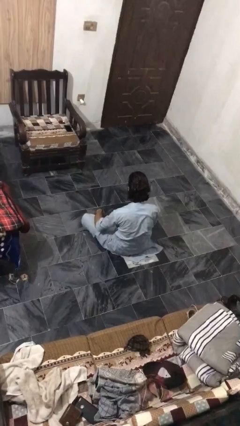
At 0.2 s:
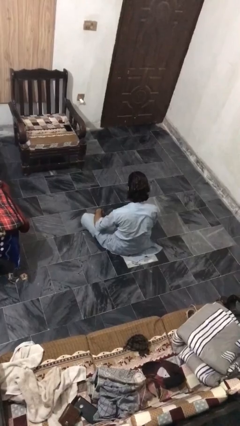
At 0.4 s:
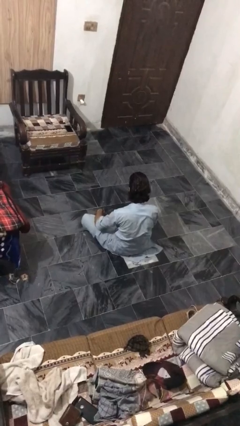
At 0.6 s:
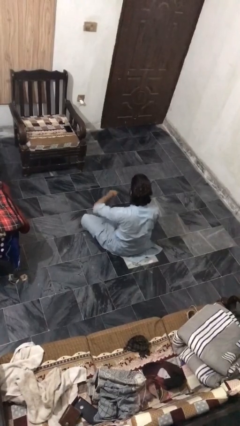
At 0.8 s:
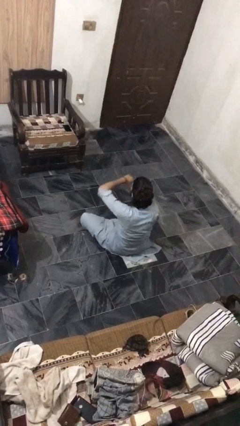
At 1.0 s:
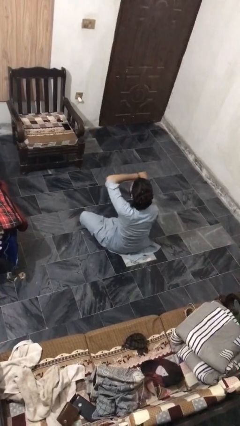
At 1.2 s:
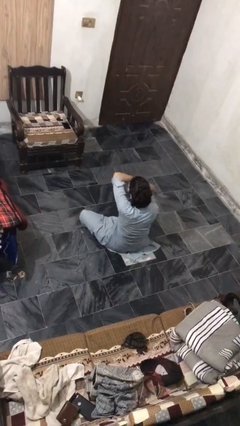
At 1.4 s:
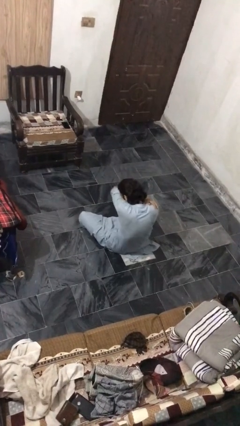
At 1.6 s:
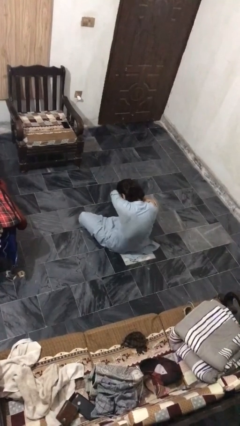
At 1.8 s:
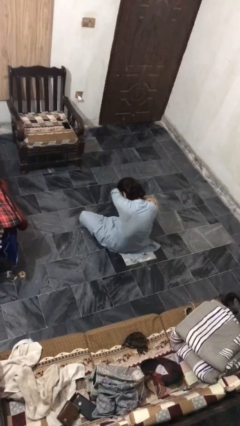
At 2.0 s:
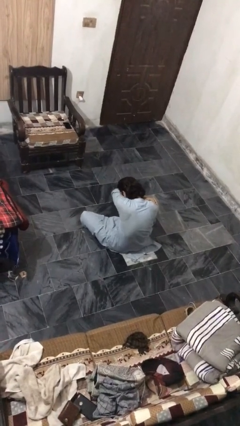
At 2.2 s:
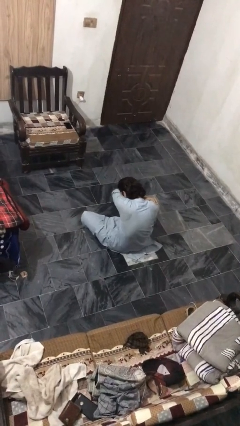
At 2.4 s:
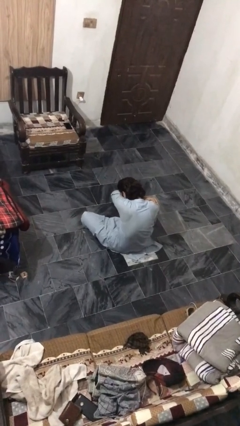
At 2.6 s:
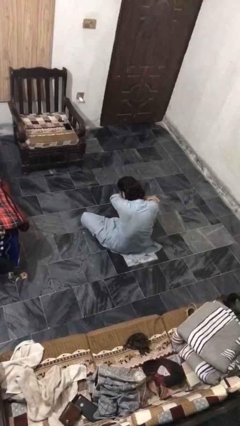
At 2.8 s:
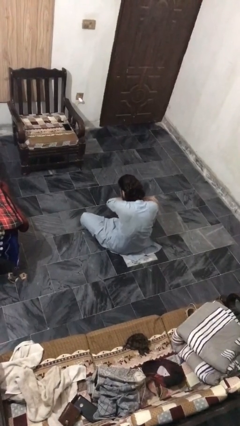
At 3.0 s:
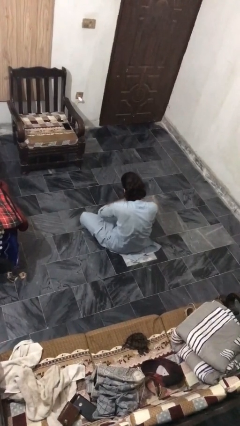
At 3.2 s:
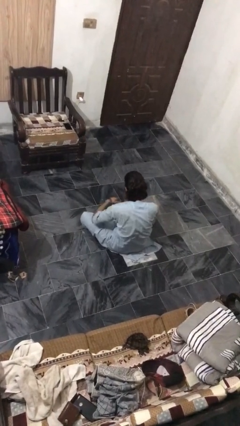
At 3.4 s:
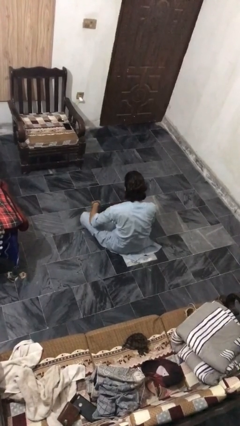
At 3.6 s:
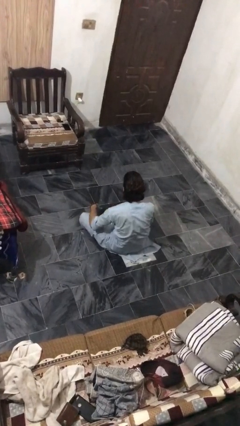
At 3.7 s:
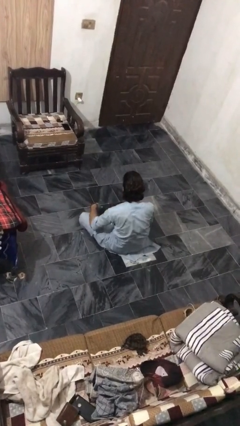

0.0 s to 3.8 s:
person sneezes into arm

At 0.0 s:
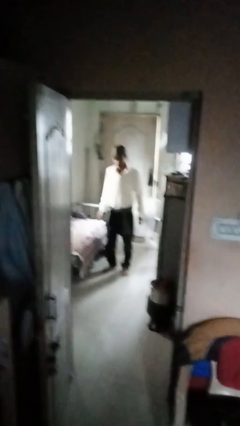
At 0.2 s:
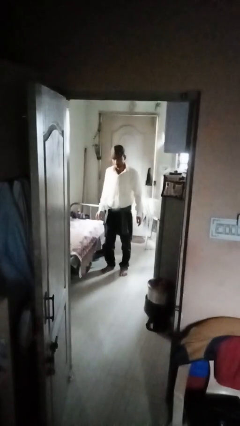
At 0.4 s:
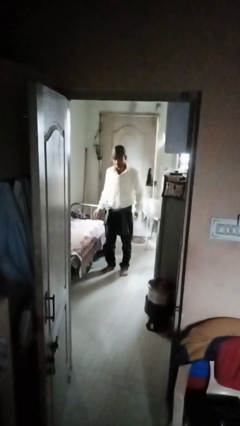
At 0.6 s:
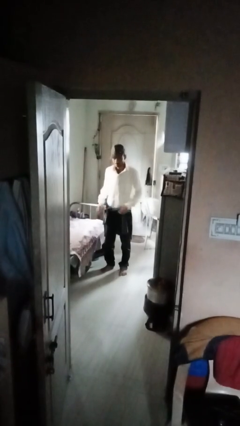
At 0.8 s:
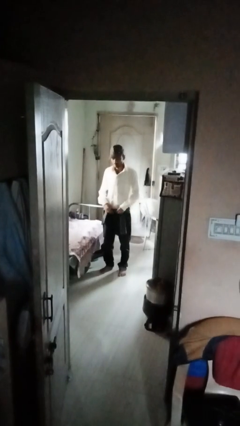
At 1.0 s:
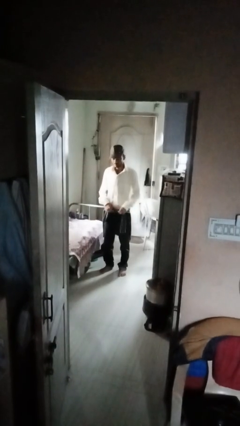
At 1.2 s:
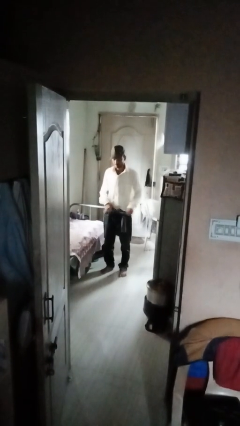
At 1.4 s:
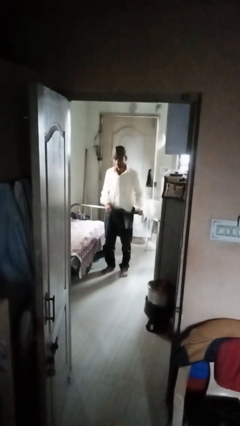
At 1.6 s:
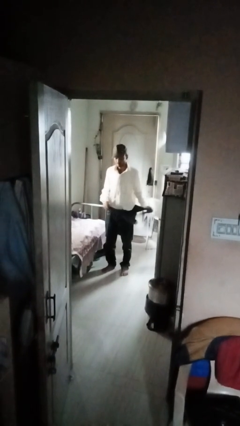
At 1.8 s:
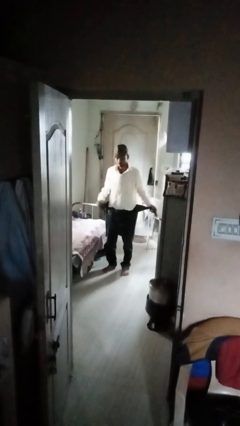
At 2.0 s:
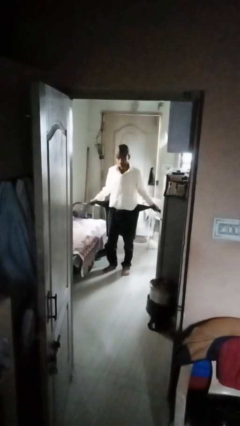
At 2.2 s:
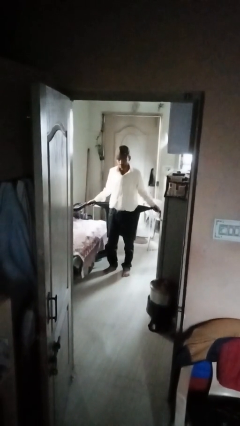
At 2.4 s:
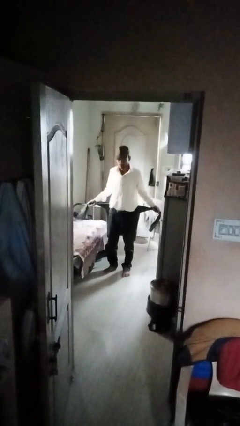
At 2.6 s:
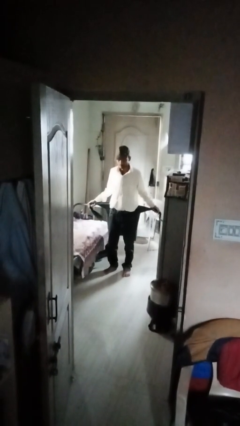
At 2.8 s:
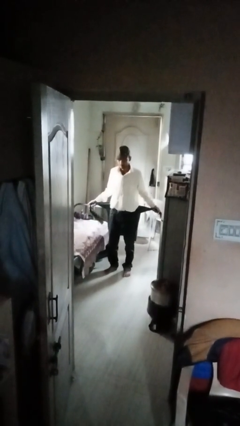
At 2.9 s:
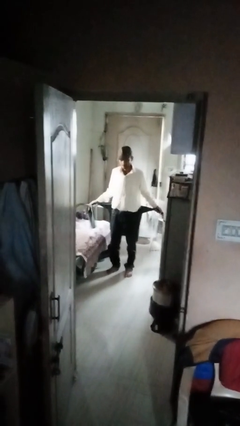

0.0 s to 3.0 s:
person unties jacket around waist

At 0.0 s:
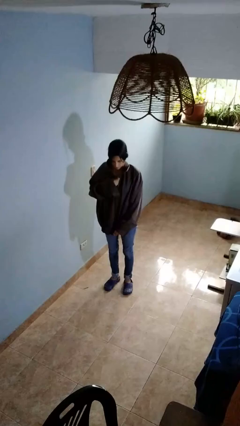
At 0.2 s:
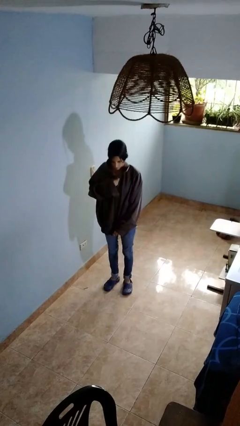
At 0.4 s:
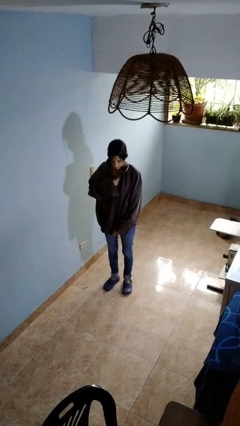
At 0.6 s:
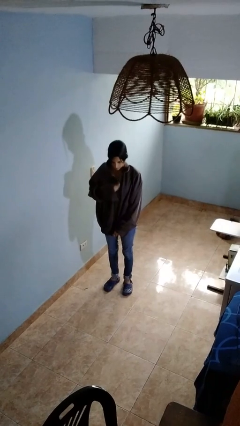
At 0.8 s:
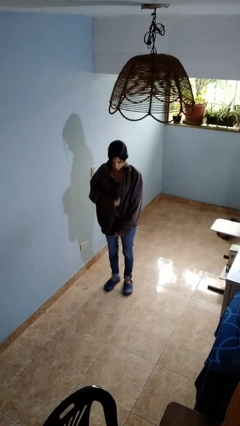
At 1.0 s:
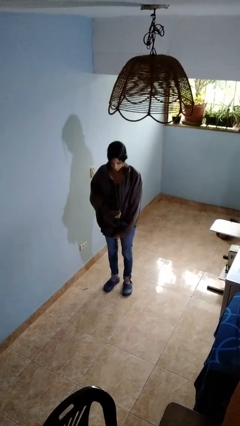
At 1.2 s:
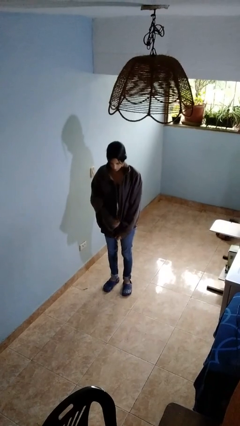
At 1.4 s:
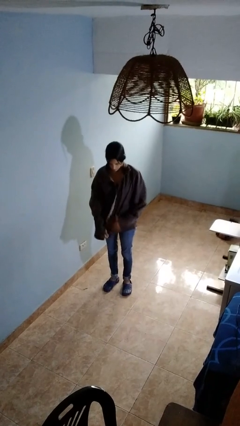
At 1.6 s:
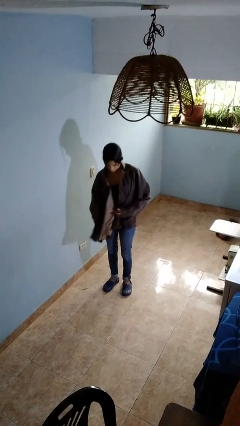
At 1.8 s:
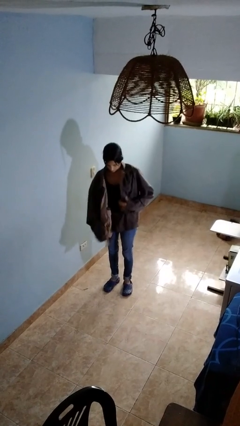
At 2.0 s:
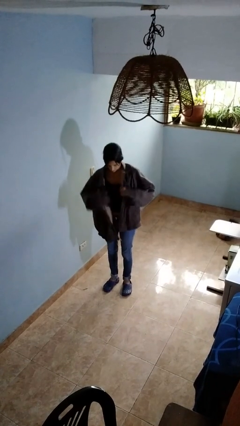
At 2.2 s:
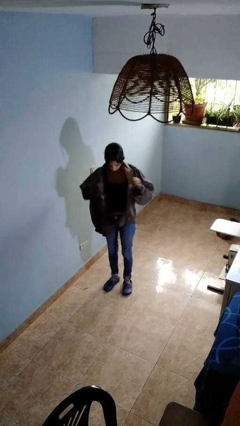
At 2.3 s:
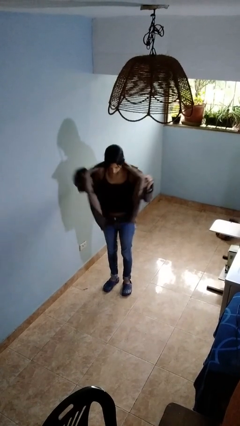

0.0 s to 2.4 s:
person unzips jacket

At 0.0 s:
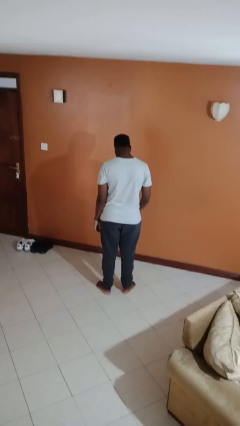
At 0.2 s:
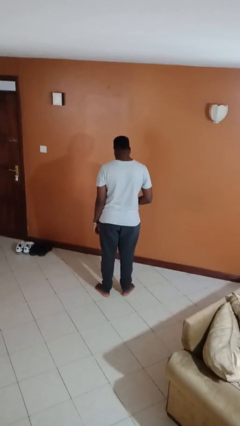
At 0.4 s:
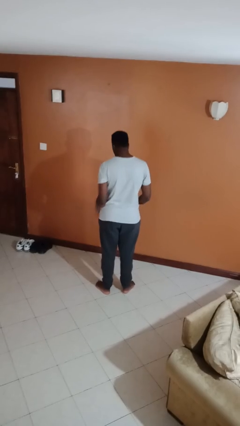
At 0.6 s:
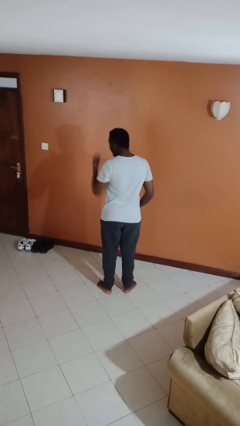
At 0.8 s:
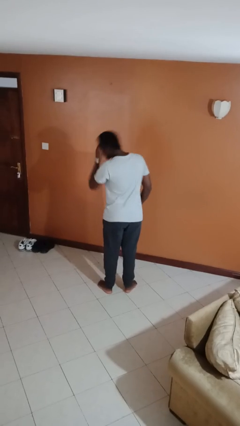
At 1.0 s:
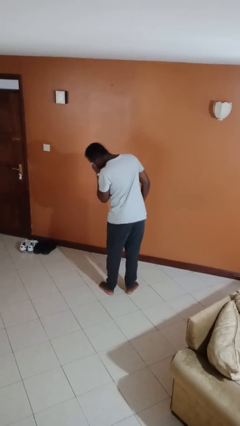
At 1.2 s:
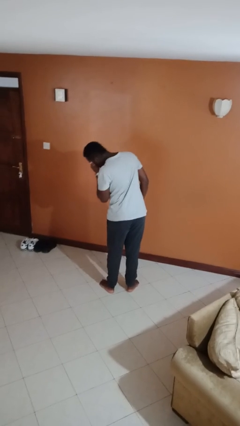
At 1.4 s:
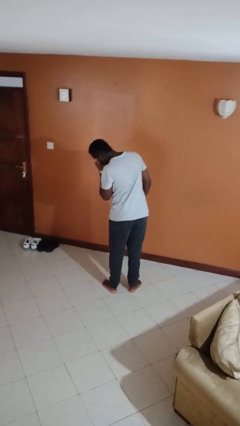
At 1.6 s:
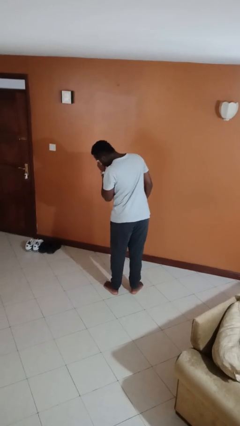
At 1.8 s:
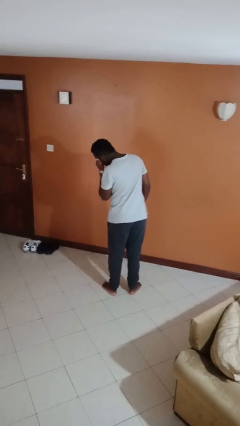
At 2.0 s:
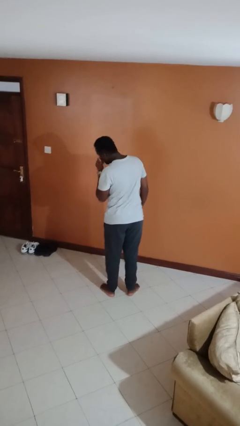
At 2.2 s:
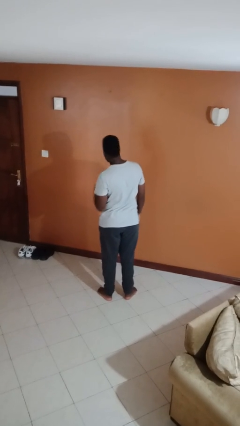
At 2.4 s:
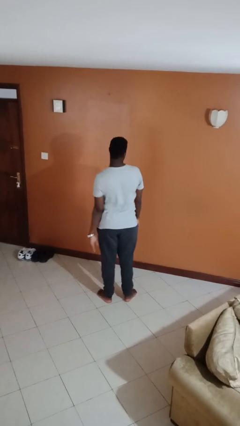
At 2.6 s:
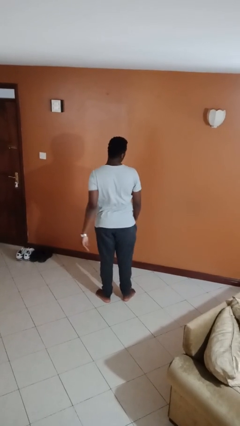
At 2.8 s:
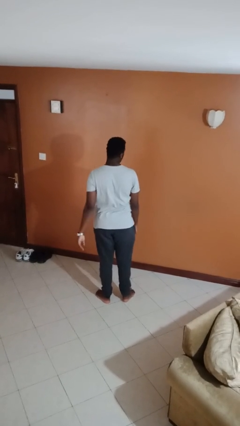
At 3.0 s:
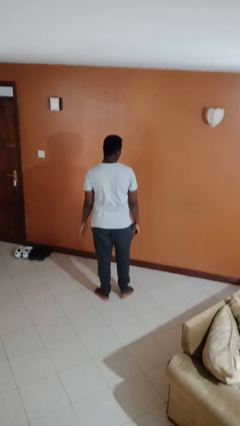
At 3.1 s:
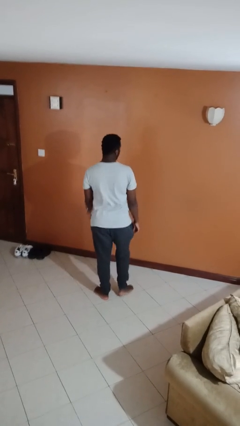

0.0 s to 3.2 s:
person sneezes into hand

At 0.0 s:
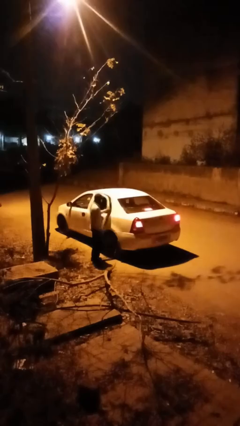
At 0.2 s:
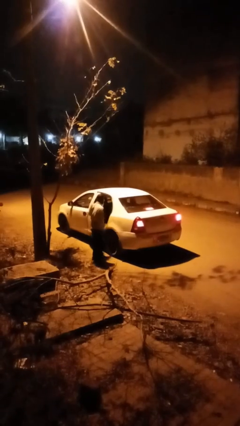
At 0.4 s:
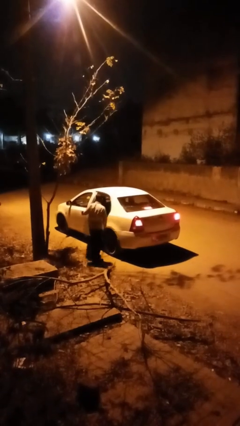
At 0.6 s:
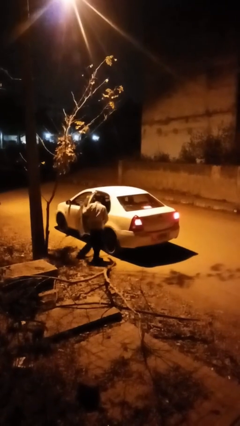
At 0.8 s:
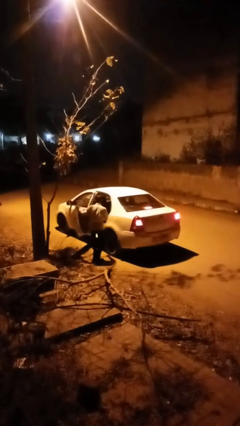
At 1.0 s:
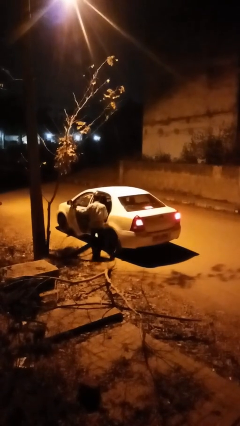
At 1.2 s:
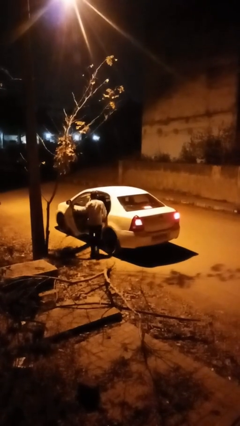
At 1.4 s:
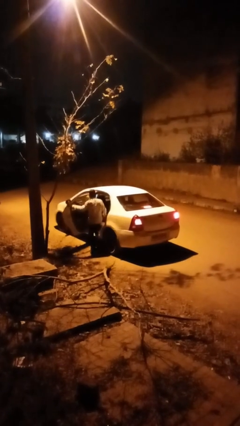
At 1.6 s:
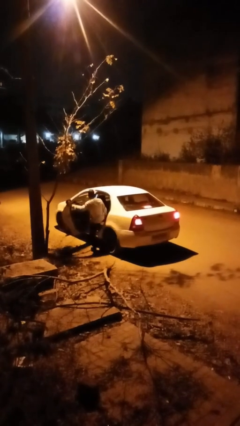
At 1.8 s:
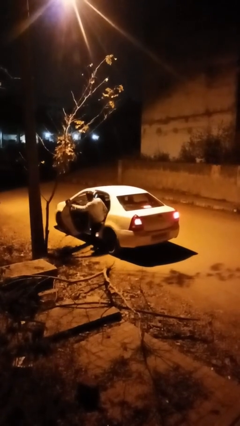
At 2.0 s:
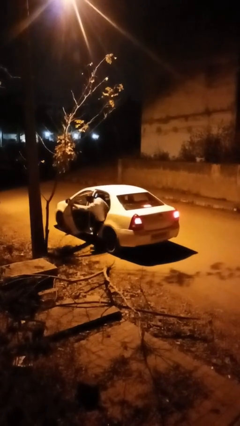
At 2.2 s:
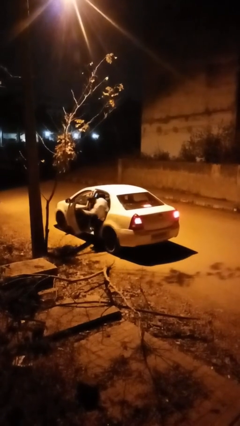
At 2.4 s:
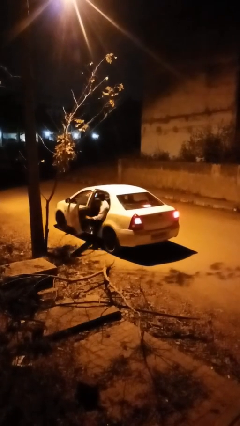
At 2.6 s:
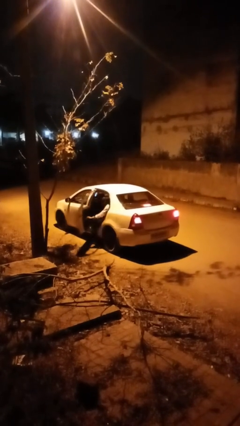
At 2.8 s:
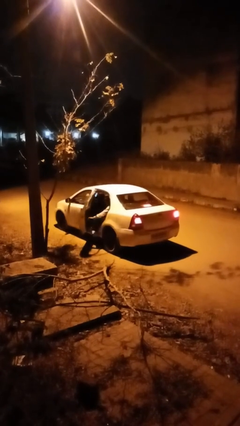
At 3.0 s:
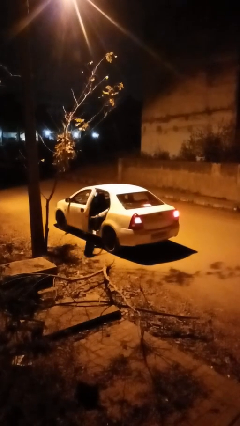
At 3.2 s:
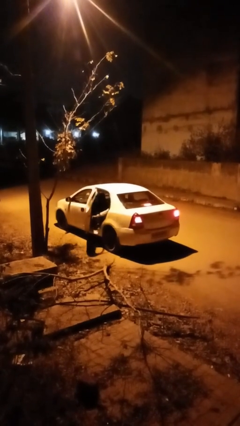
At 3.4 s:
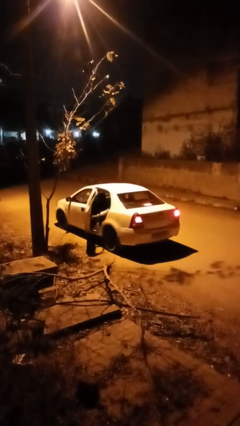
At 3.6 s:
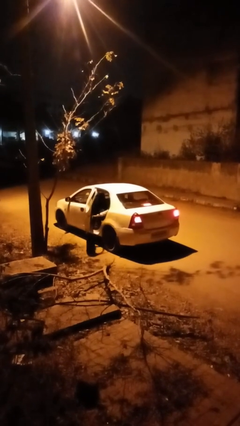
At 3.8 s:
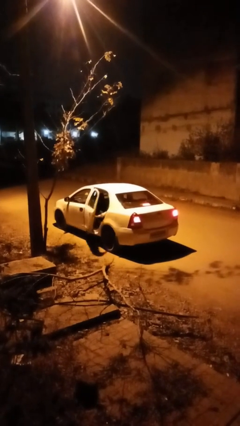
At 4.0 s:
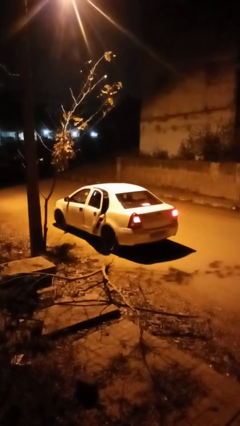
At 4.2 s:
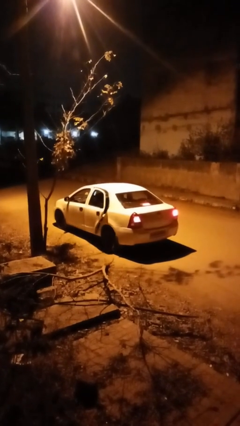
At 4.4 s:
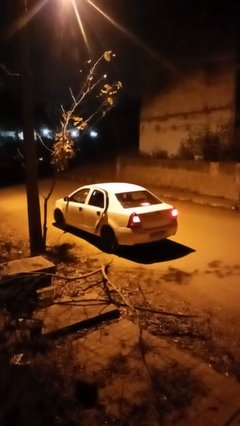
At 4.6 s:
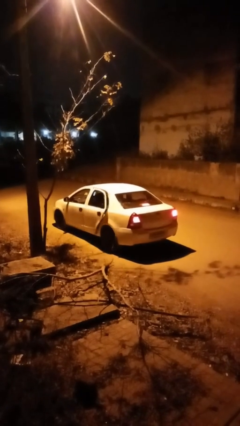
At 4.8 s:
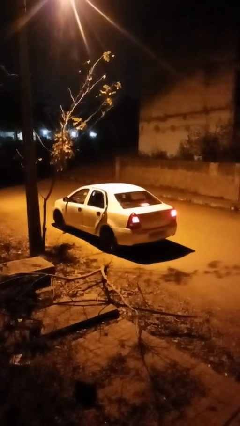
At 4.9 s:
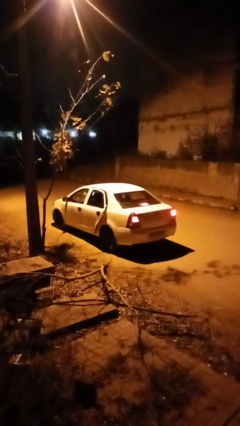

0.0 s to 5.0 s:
car picks up person
